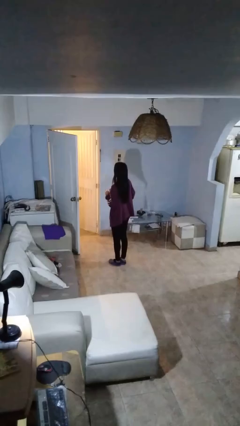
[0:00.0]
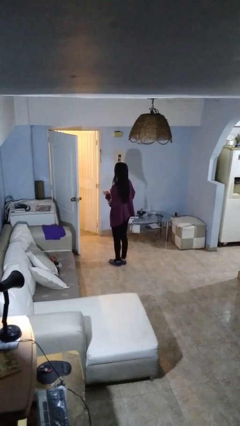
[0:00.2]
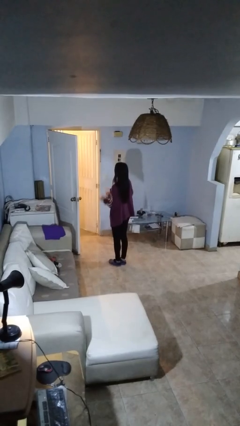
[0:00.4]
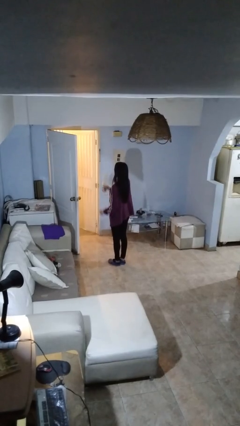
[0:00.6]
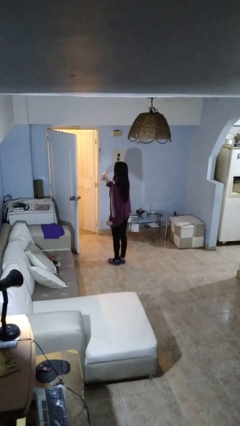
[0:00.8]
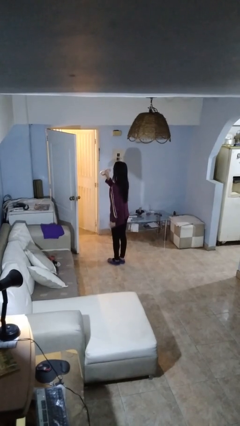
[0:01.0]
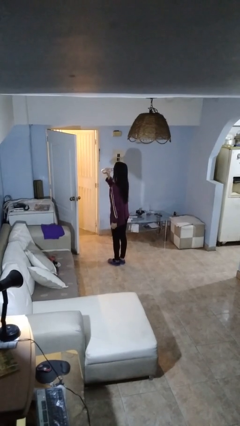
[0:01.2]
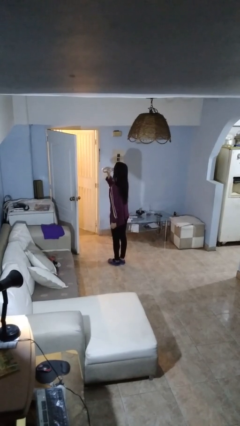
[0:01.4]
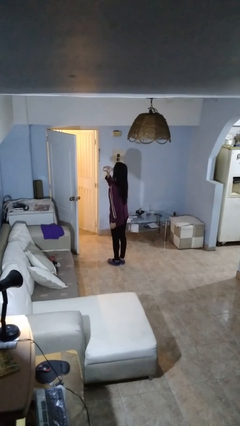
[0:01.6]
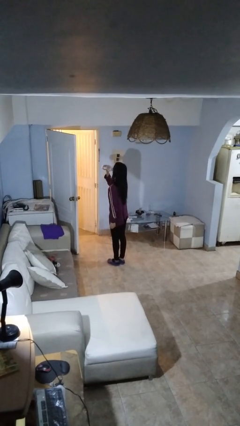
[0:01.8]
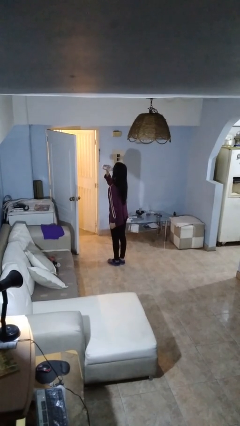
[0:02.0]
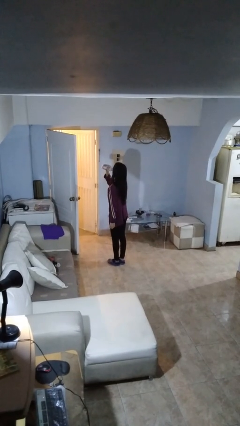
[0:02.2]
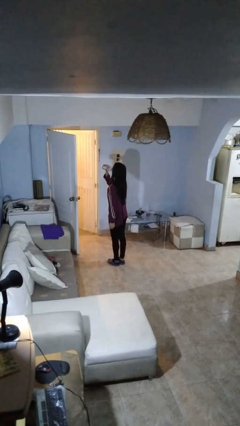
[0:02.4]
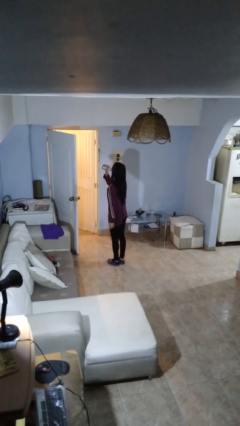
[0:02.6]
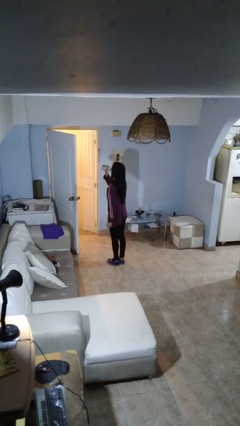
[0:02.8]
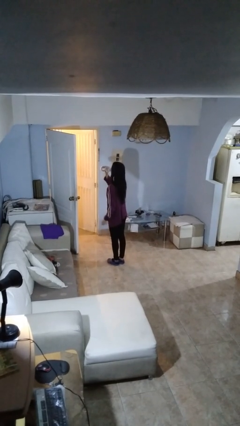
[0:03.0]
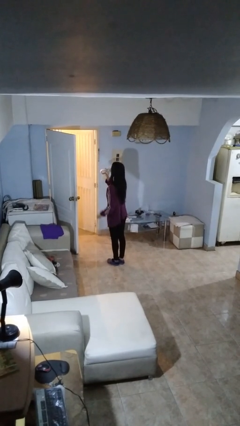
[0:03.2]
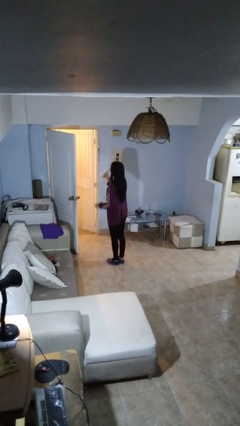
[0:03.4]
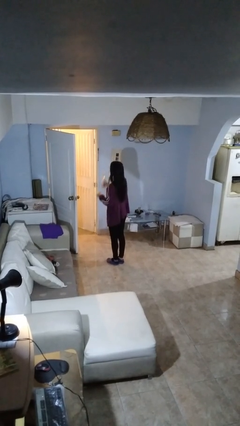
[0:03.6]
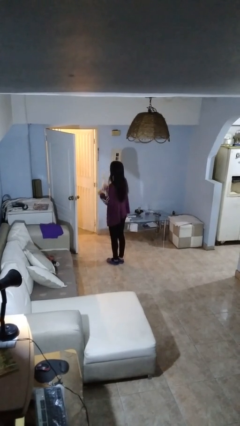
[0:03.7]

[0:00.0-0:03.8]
person drinks from bottle

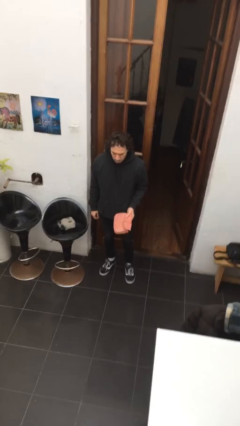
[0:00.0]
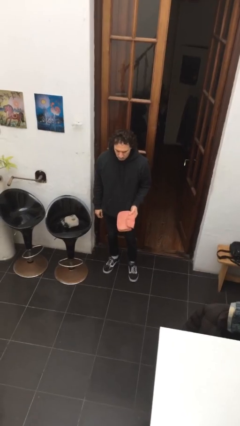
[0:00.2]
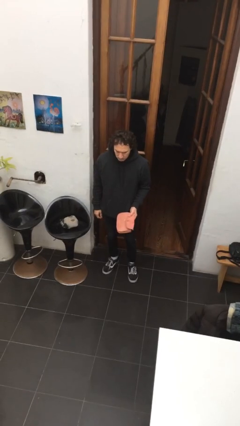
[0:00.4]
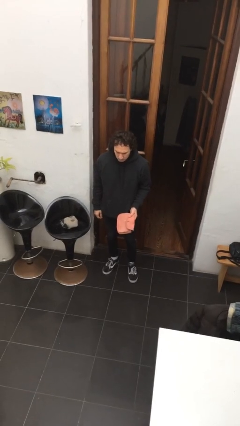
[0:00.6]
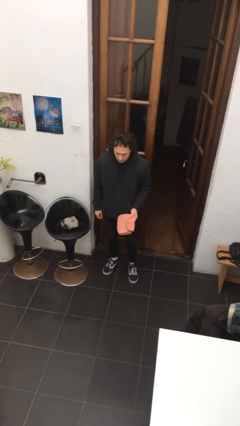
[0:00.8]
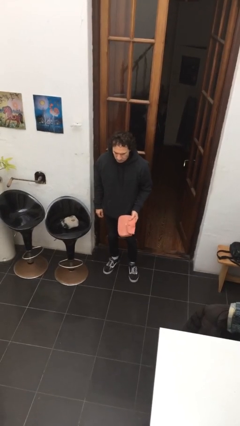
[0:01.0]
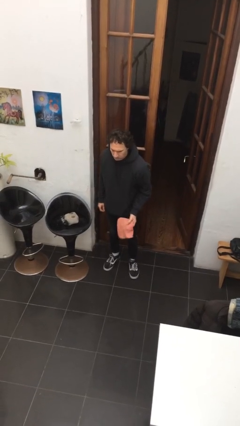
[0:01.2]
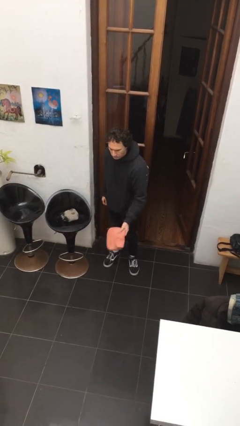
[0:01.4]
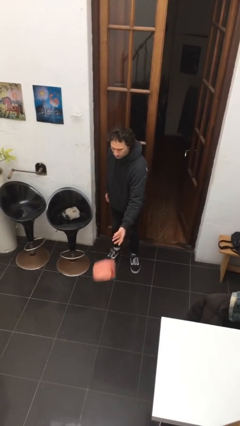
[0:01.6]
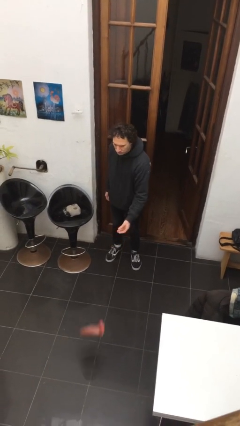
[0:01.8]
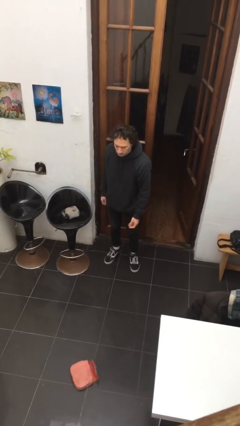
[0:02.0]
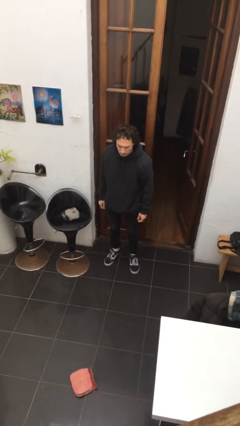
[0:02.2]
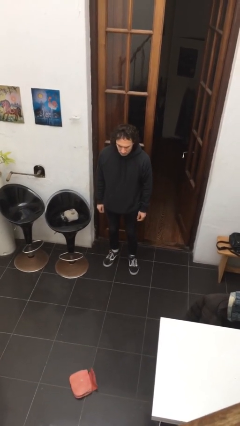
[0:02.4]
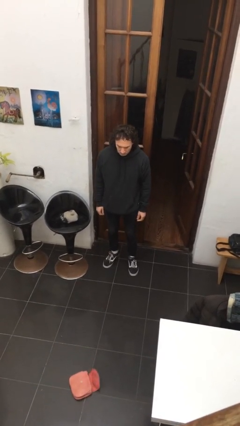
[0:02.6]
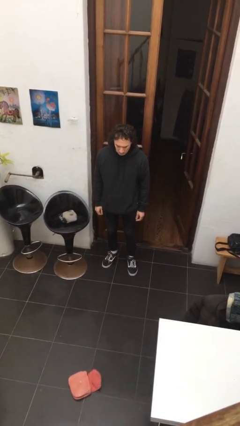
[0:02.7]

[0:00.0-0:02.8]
person throws object to ground

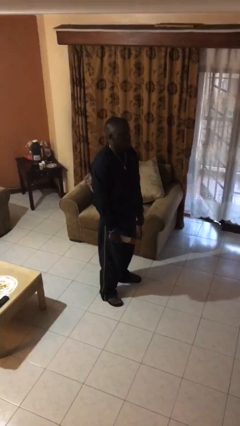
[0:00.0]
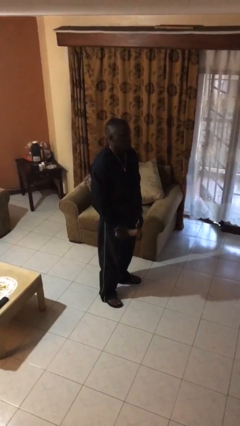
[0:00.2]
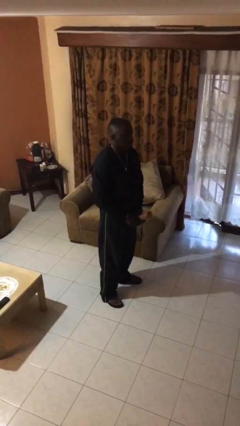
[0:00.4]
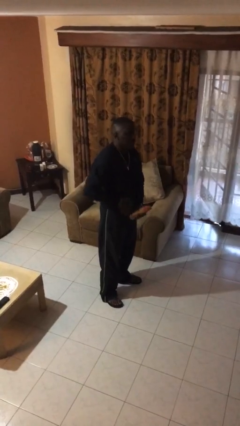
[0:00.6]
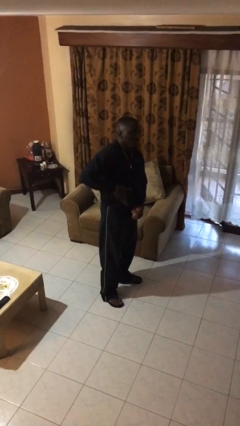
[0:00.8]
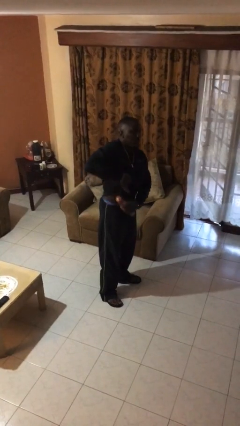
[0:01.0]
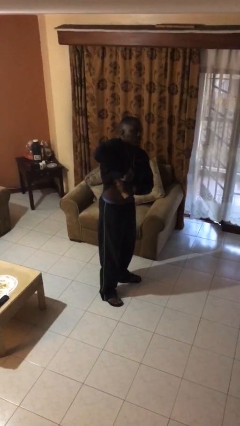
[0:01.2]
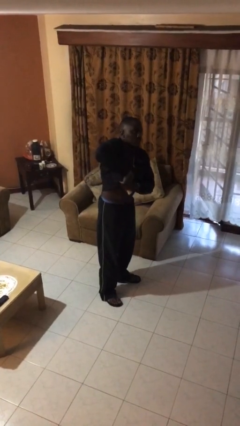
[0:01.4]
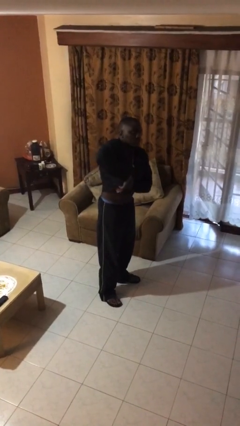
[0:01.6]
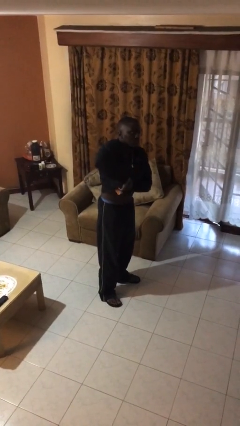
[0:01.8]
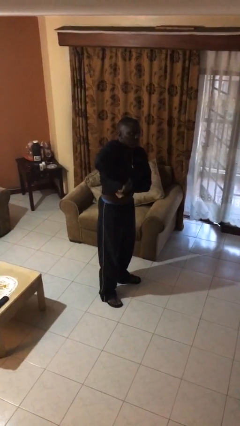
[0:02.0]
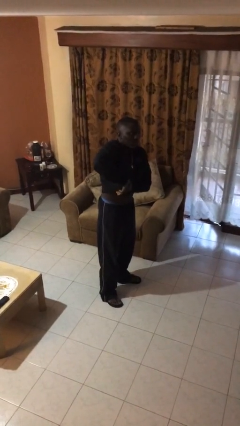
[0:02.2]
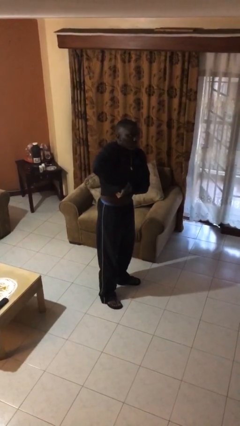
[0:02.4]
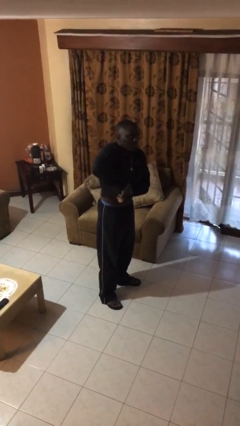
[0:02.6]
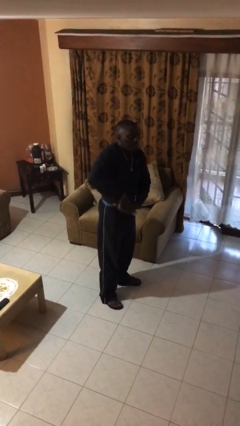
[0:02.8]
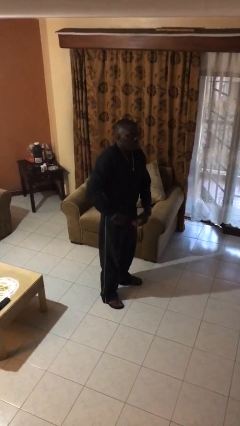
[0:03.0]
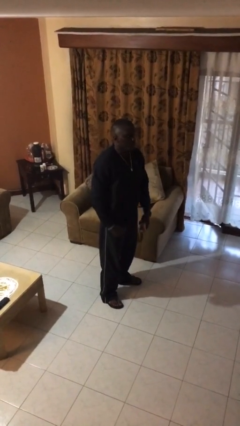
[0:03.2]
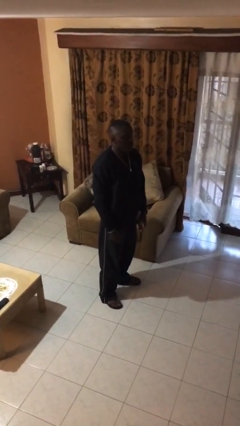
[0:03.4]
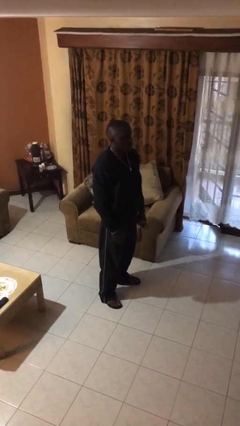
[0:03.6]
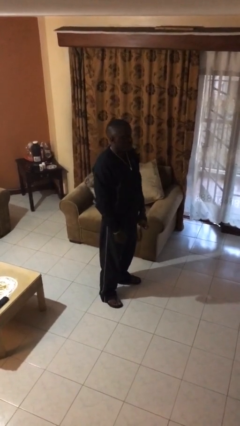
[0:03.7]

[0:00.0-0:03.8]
person applies deodorant

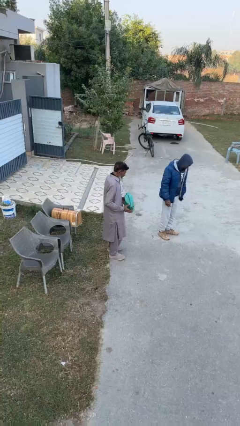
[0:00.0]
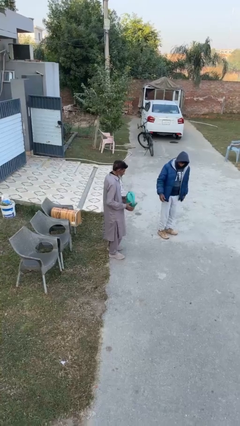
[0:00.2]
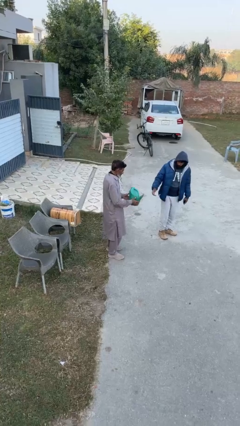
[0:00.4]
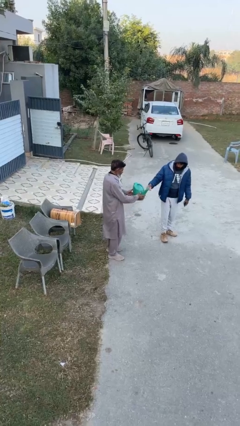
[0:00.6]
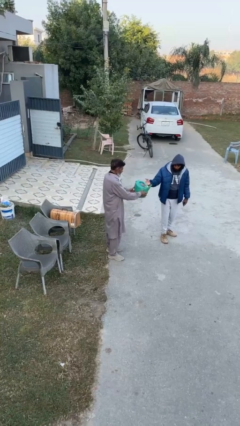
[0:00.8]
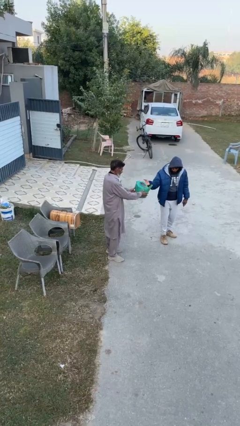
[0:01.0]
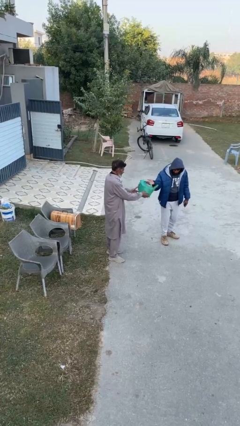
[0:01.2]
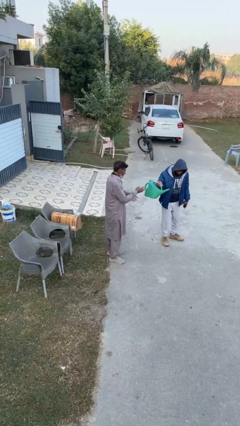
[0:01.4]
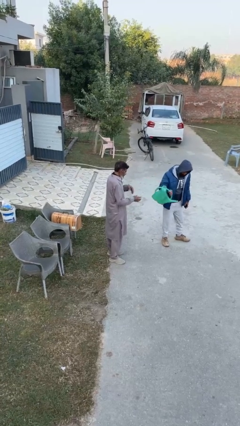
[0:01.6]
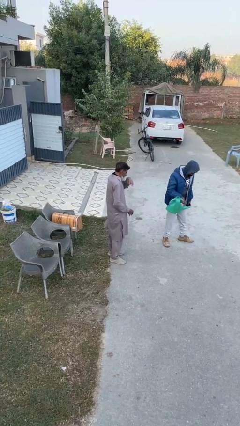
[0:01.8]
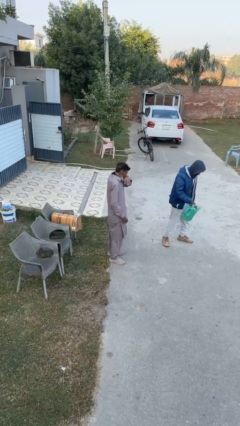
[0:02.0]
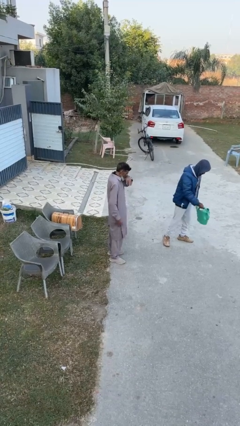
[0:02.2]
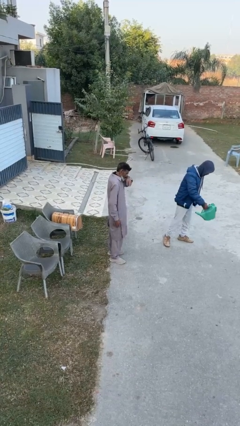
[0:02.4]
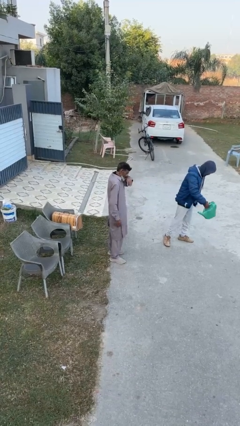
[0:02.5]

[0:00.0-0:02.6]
person transfers object to person

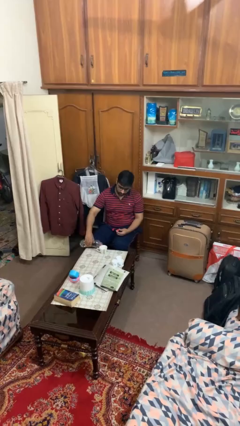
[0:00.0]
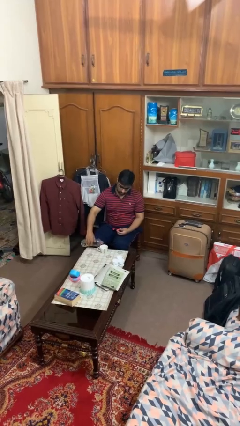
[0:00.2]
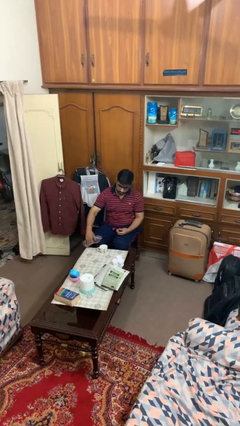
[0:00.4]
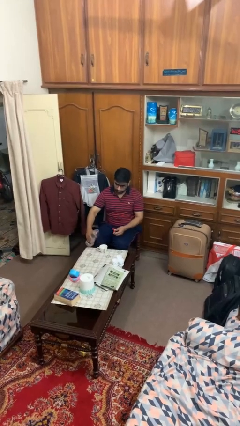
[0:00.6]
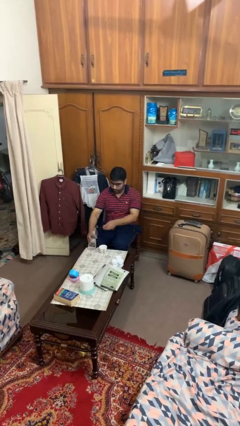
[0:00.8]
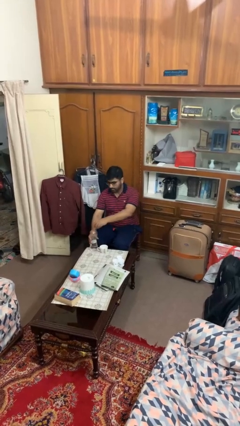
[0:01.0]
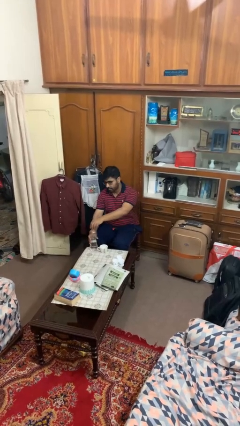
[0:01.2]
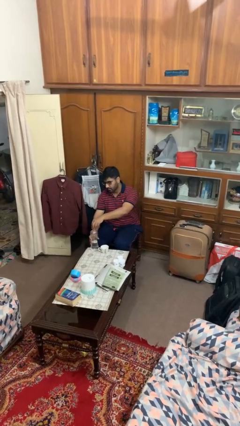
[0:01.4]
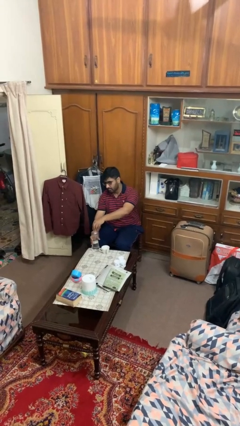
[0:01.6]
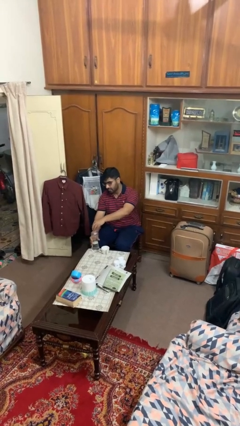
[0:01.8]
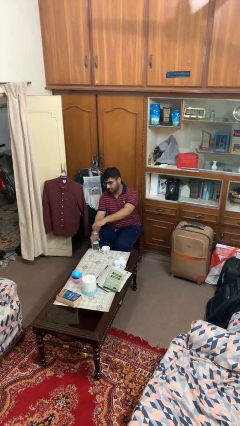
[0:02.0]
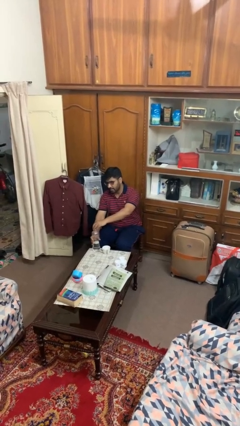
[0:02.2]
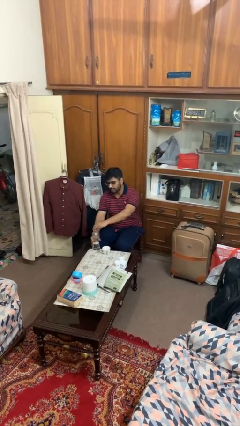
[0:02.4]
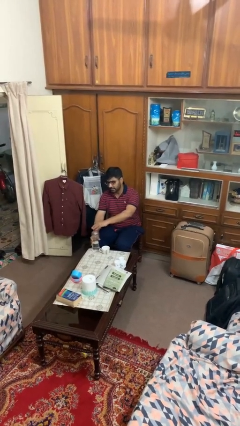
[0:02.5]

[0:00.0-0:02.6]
person screws lid to bottle

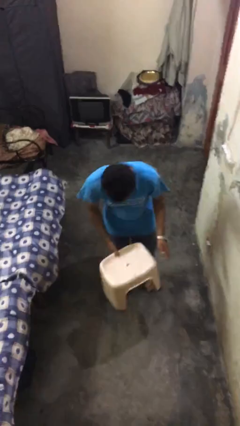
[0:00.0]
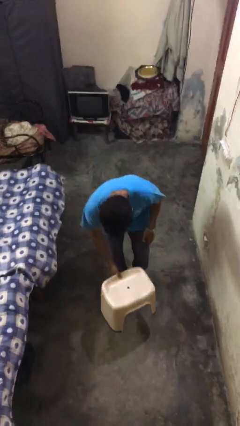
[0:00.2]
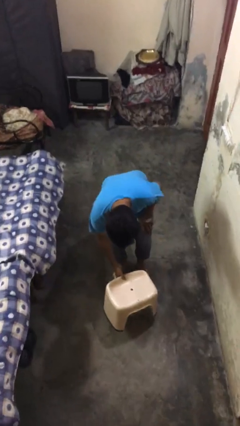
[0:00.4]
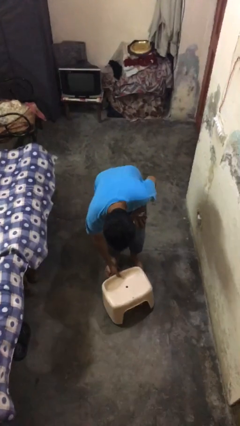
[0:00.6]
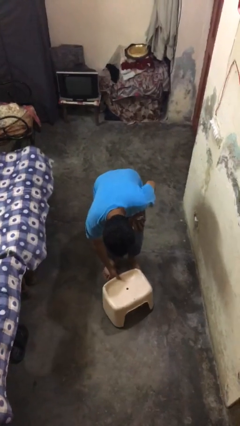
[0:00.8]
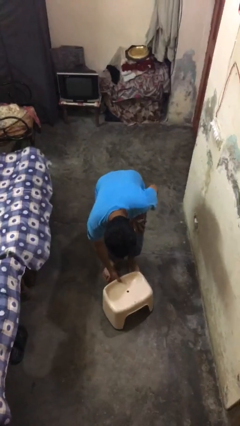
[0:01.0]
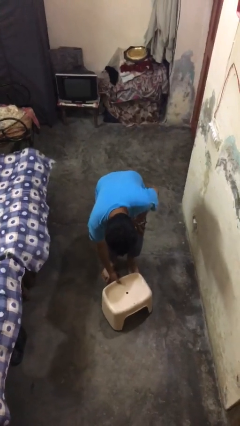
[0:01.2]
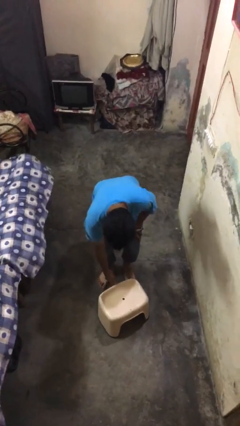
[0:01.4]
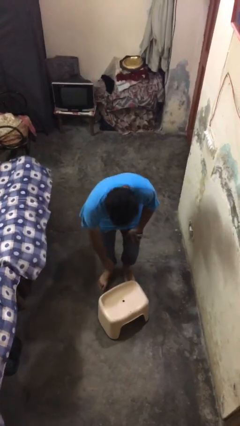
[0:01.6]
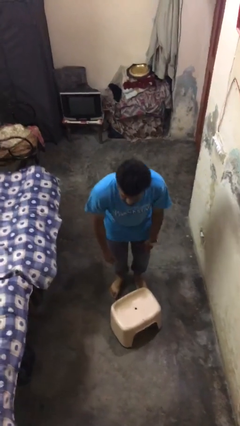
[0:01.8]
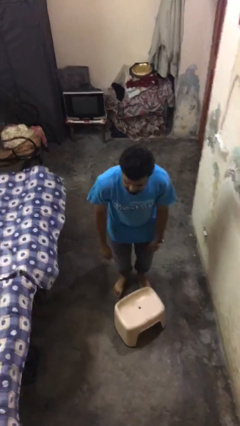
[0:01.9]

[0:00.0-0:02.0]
person puts down object on floor
